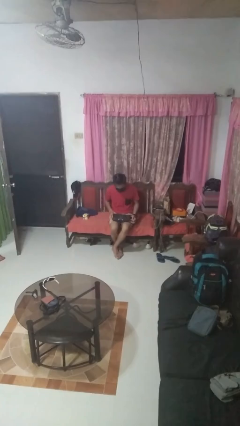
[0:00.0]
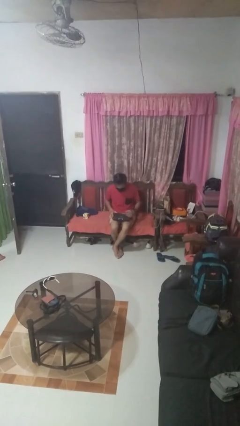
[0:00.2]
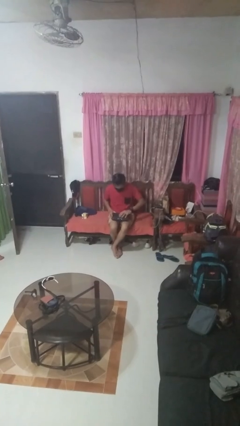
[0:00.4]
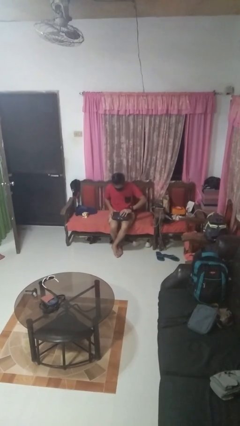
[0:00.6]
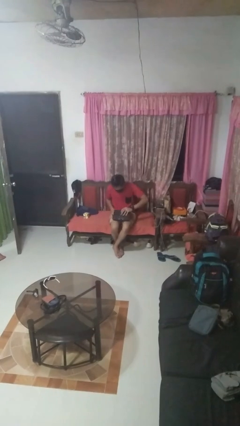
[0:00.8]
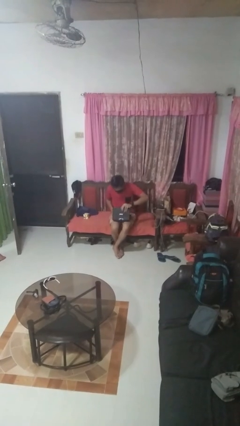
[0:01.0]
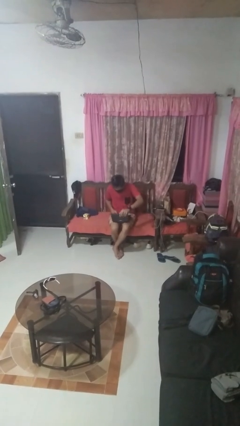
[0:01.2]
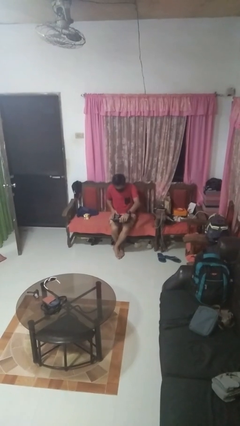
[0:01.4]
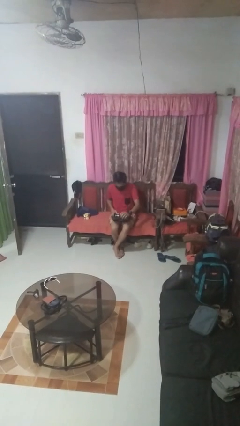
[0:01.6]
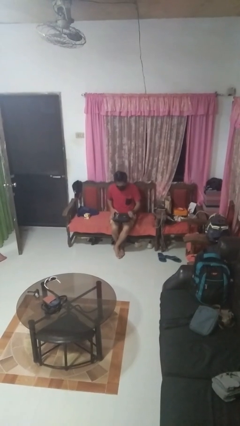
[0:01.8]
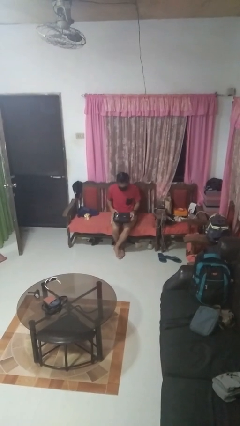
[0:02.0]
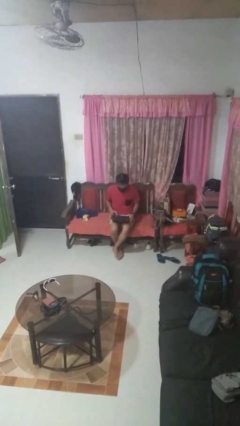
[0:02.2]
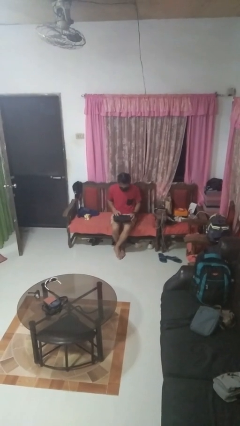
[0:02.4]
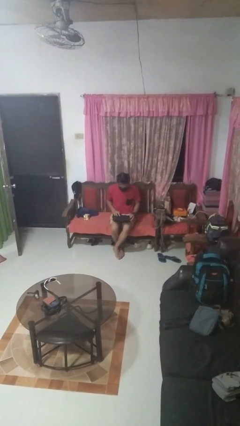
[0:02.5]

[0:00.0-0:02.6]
person opens laptop

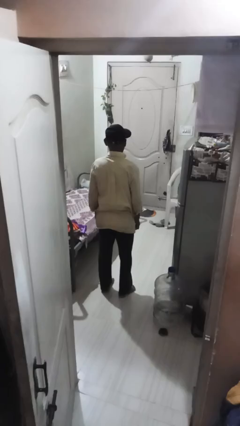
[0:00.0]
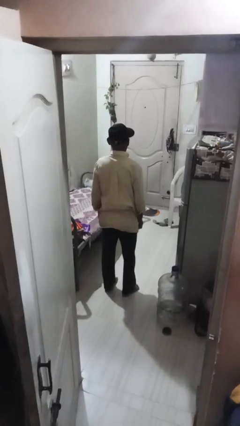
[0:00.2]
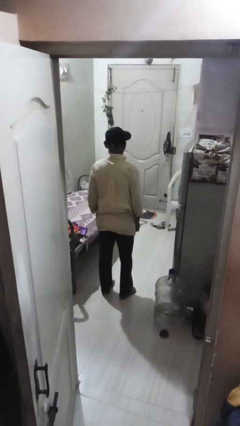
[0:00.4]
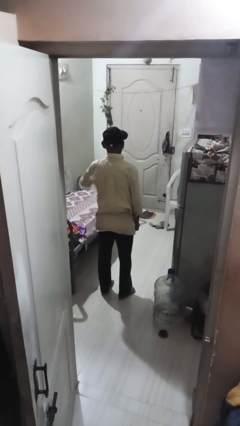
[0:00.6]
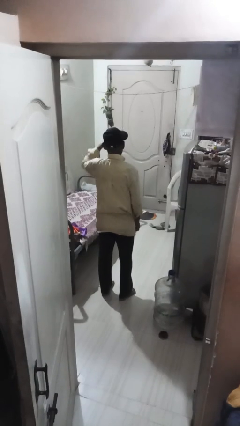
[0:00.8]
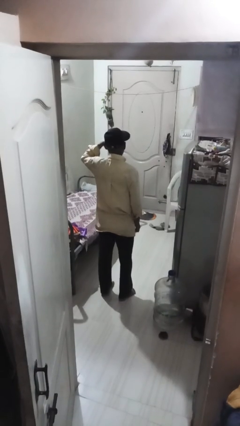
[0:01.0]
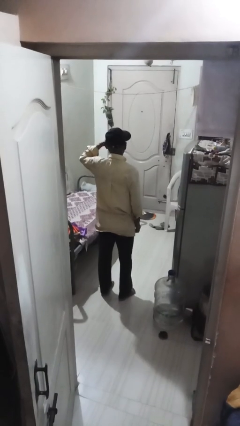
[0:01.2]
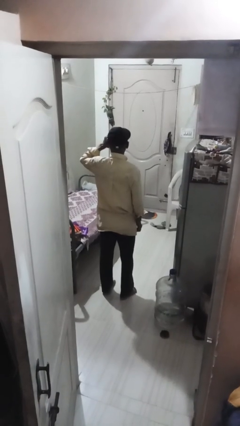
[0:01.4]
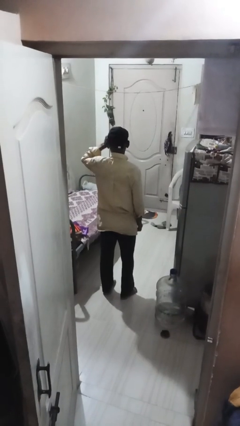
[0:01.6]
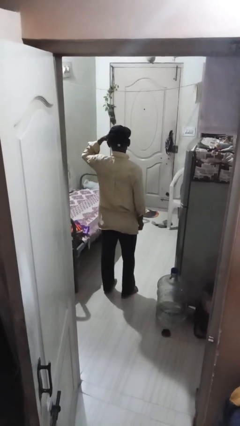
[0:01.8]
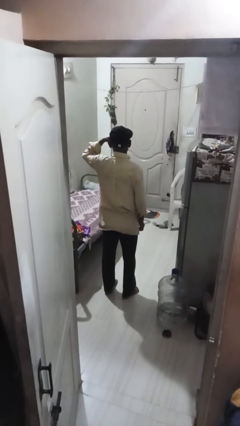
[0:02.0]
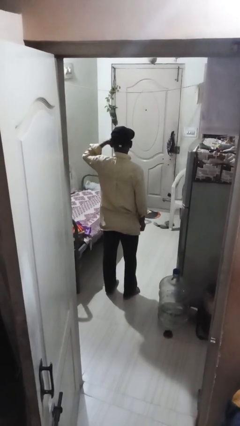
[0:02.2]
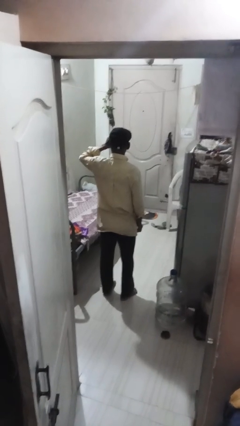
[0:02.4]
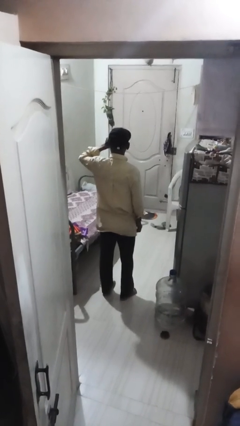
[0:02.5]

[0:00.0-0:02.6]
person rubs eyes

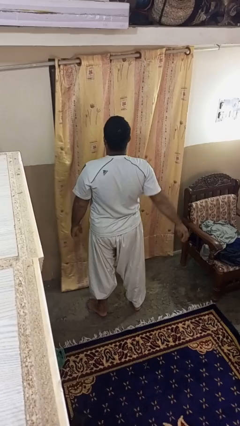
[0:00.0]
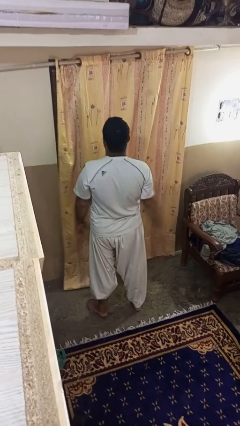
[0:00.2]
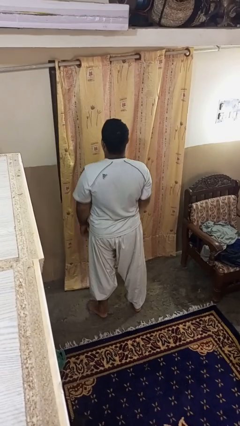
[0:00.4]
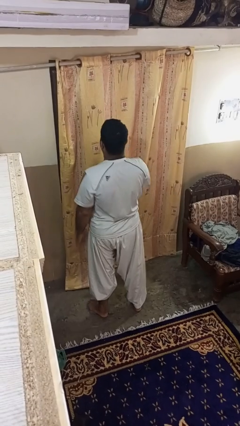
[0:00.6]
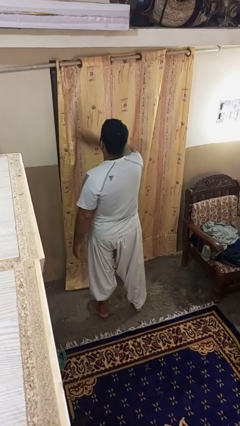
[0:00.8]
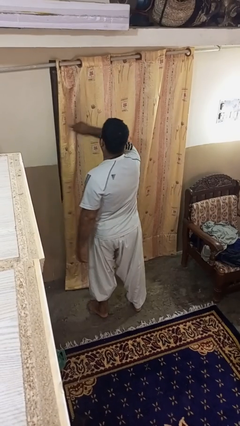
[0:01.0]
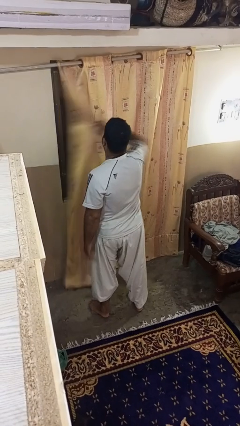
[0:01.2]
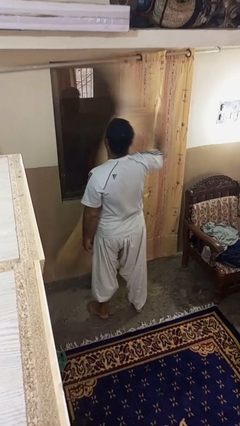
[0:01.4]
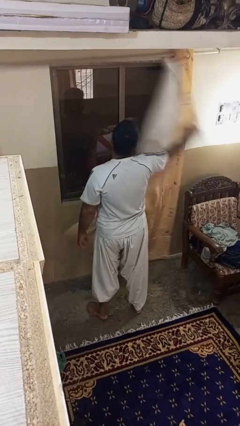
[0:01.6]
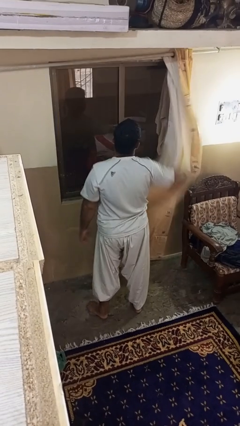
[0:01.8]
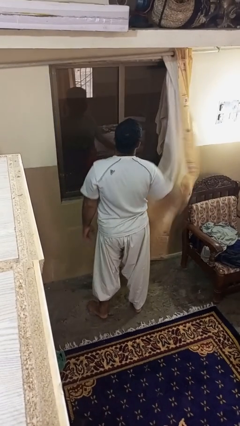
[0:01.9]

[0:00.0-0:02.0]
person opens curtains

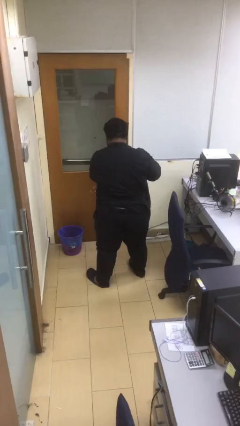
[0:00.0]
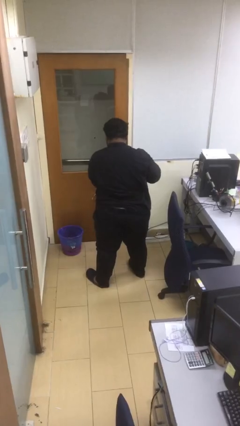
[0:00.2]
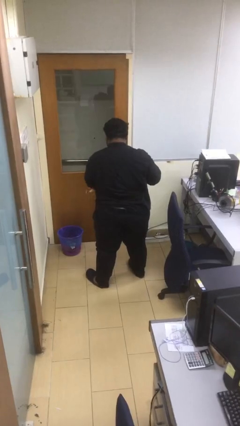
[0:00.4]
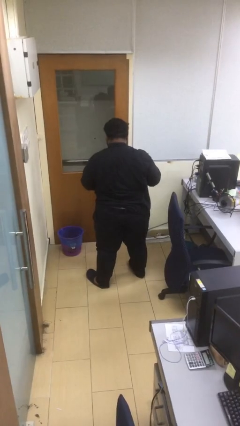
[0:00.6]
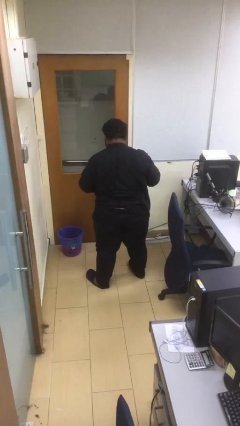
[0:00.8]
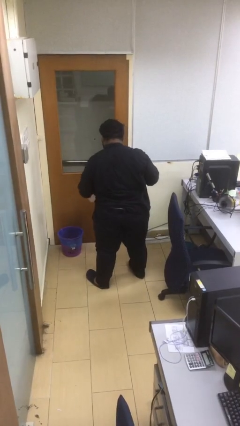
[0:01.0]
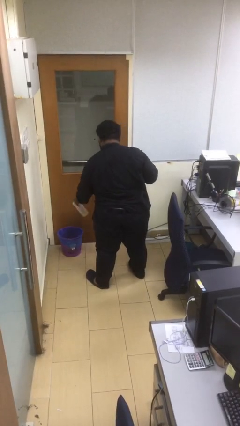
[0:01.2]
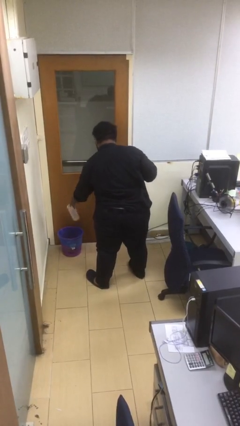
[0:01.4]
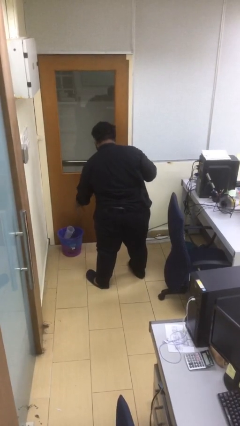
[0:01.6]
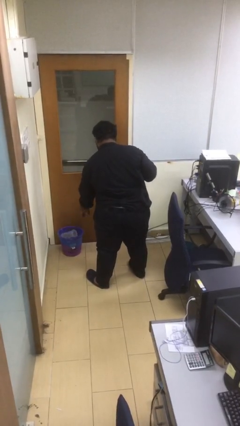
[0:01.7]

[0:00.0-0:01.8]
person discards trash

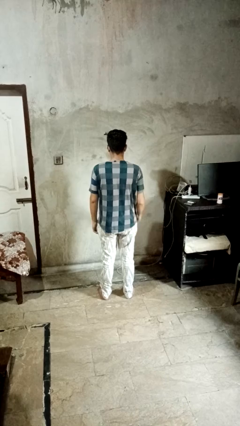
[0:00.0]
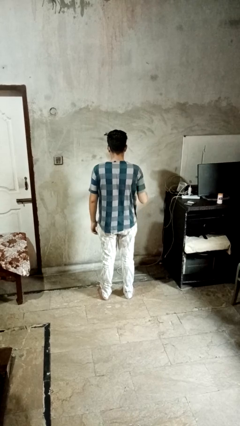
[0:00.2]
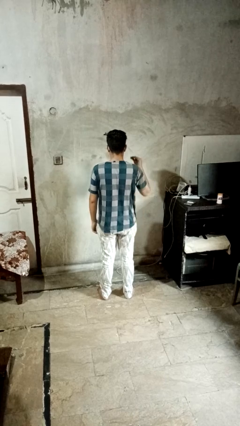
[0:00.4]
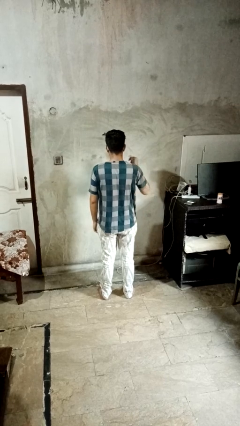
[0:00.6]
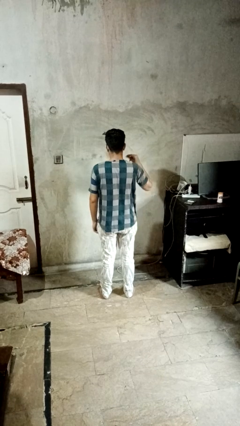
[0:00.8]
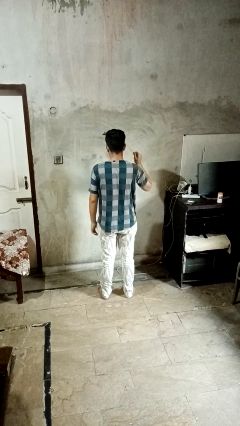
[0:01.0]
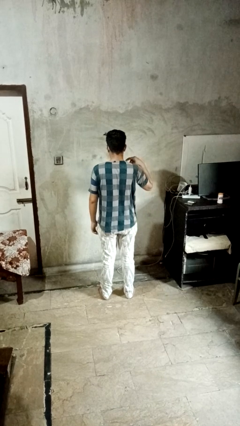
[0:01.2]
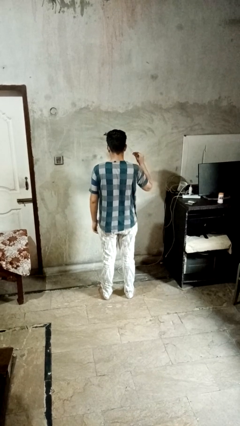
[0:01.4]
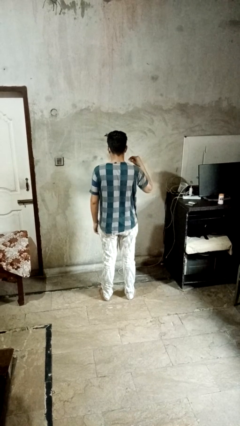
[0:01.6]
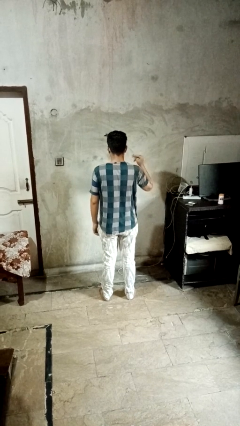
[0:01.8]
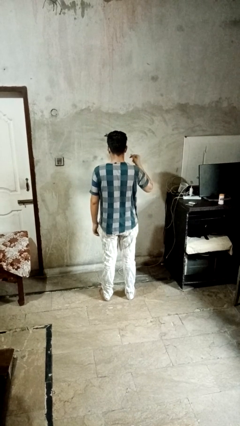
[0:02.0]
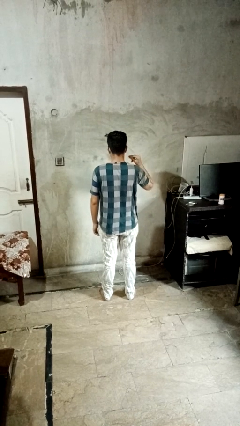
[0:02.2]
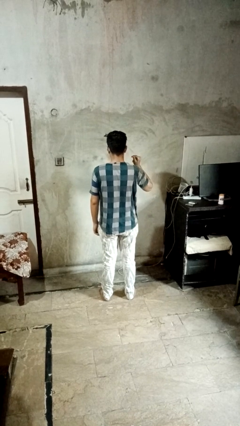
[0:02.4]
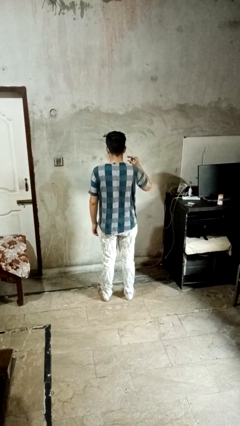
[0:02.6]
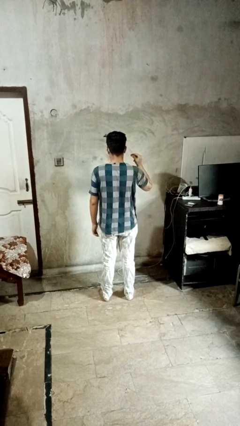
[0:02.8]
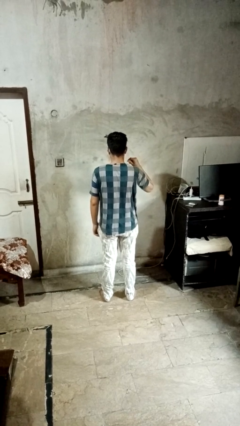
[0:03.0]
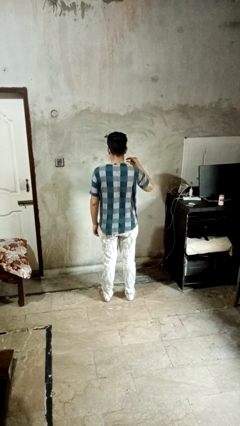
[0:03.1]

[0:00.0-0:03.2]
person snaps fingers

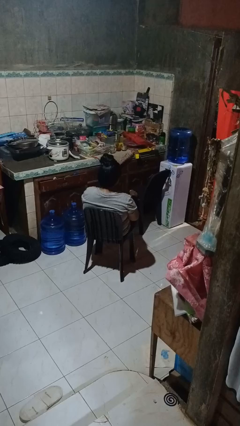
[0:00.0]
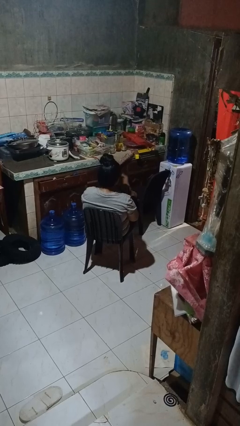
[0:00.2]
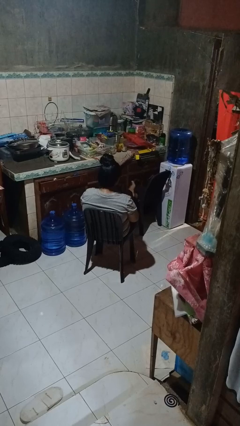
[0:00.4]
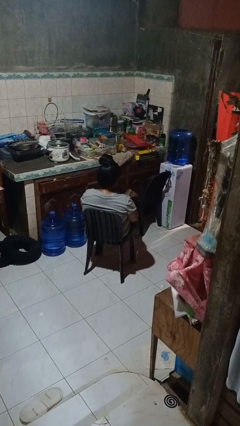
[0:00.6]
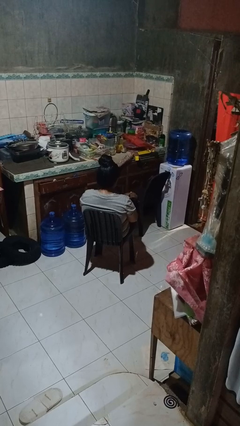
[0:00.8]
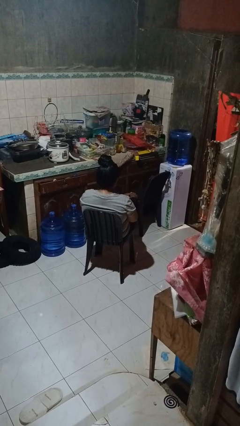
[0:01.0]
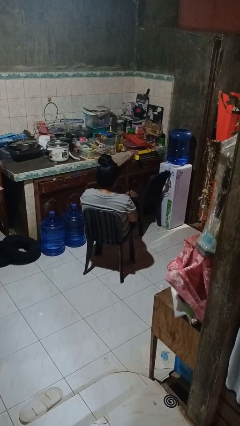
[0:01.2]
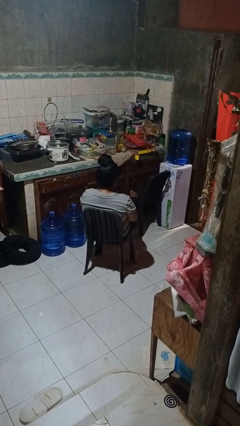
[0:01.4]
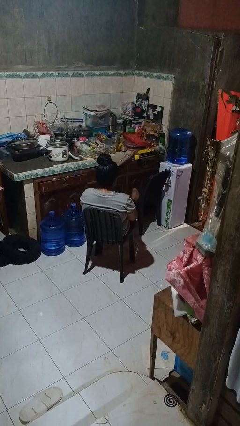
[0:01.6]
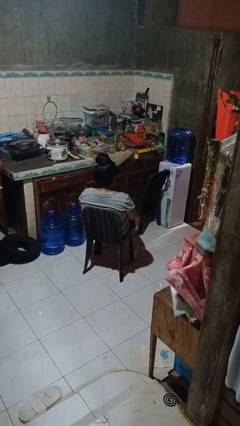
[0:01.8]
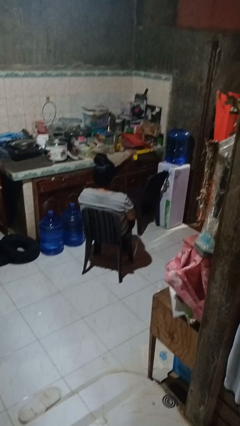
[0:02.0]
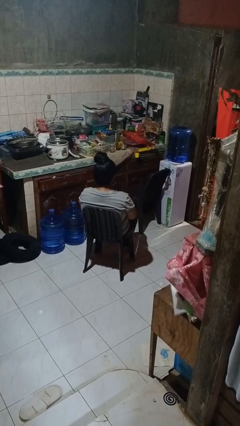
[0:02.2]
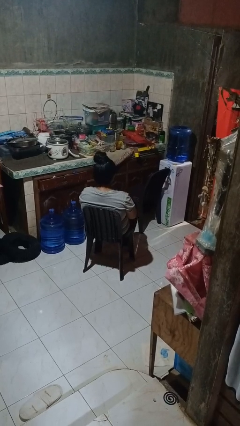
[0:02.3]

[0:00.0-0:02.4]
person puts feet up

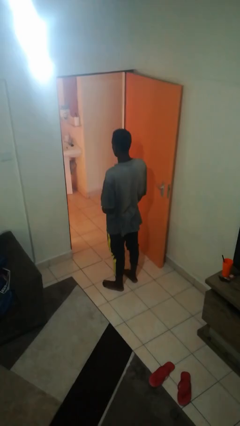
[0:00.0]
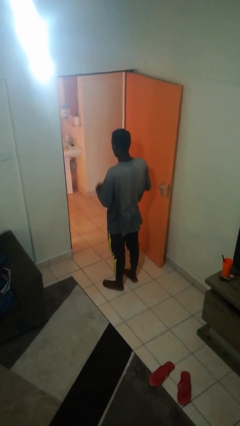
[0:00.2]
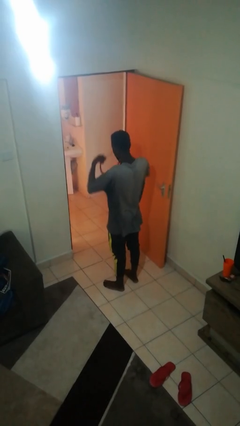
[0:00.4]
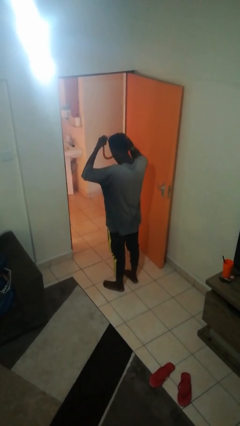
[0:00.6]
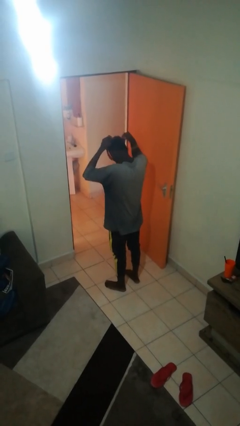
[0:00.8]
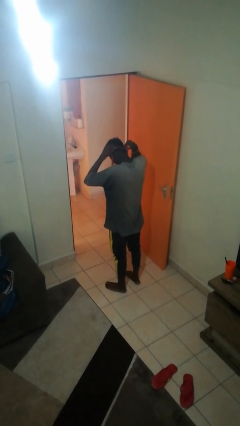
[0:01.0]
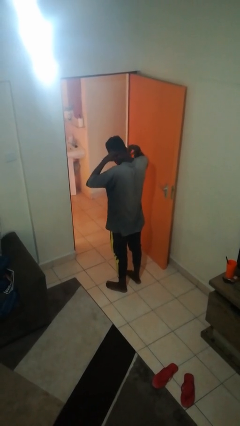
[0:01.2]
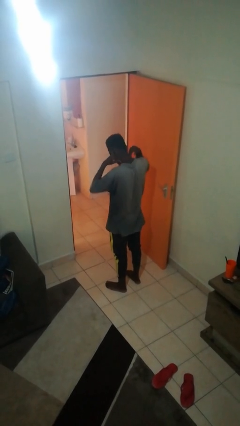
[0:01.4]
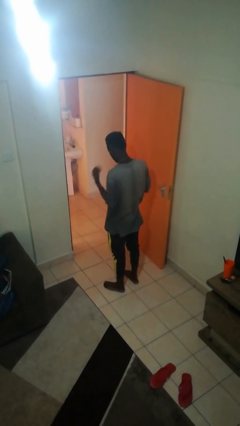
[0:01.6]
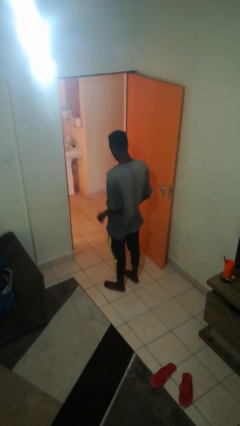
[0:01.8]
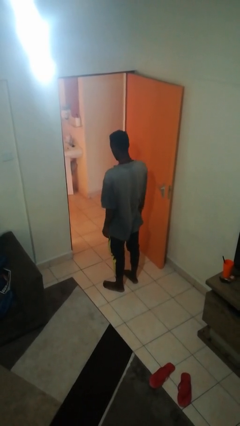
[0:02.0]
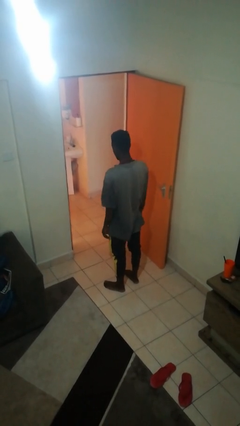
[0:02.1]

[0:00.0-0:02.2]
person puts on necklace

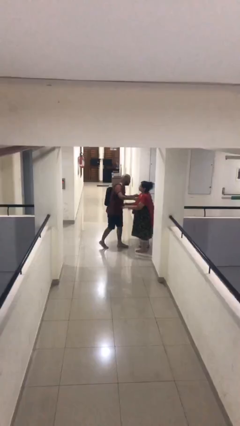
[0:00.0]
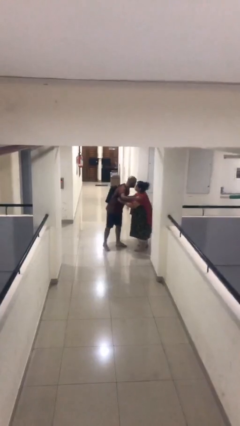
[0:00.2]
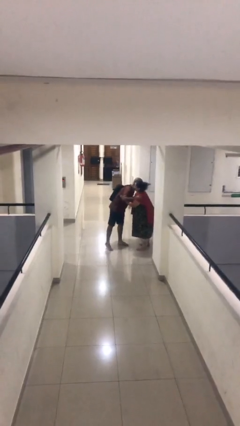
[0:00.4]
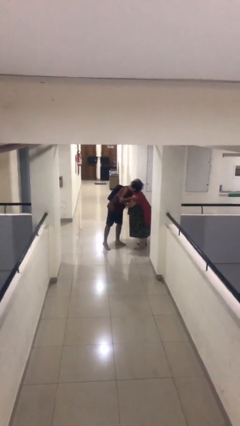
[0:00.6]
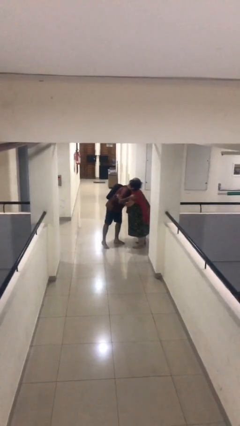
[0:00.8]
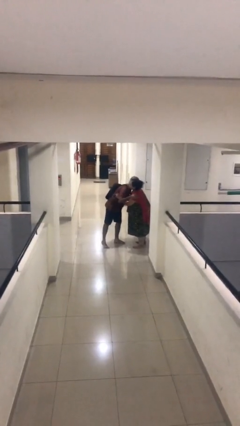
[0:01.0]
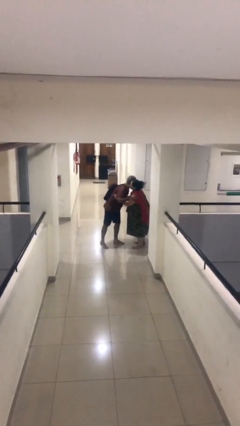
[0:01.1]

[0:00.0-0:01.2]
person embraces person